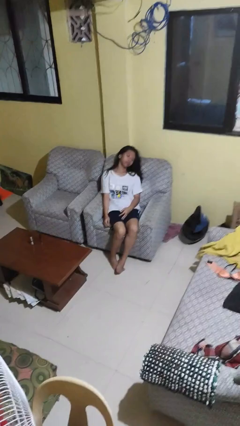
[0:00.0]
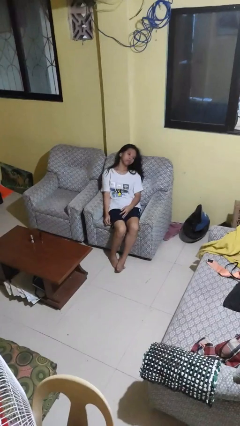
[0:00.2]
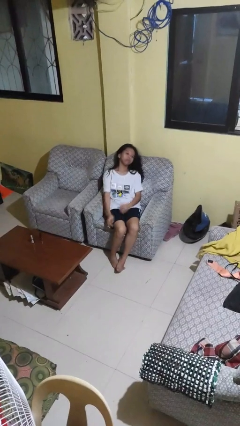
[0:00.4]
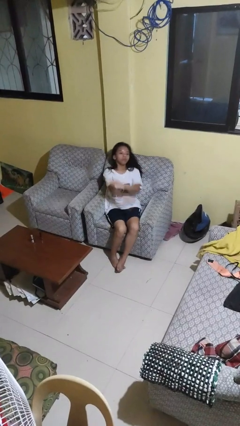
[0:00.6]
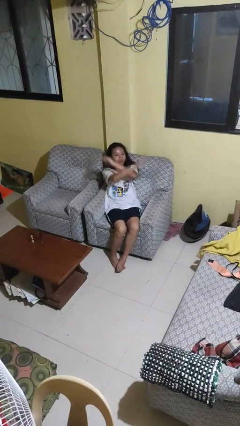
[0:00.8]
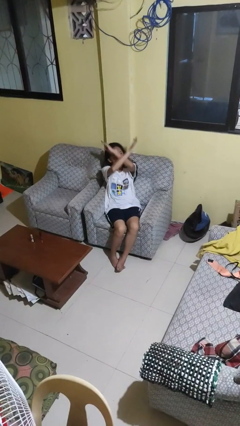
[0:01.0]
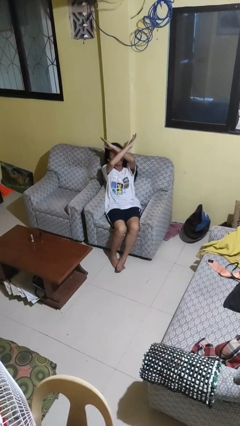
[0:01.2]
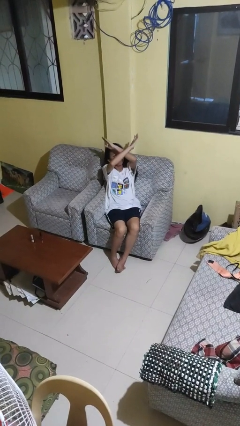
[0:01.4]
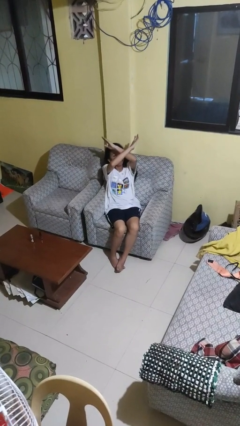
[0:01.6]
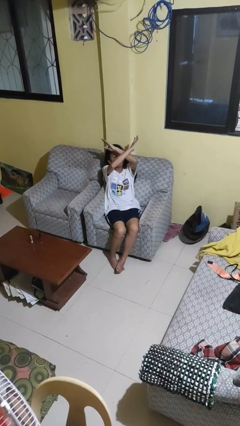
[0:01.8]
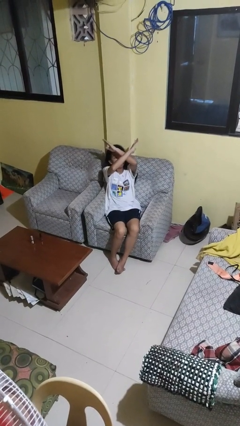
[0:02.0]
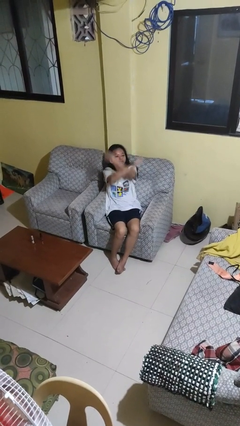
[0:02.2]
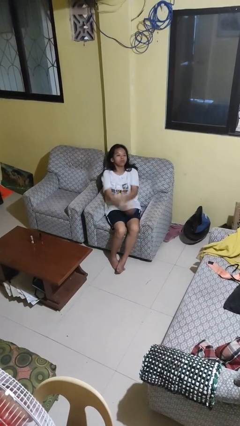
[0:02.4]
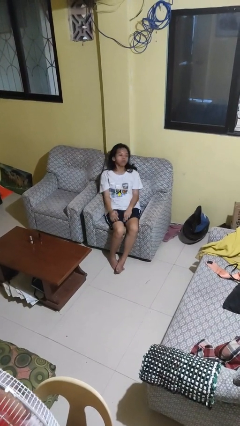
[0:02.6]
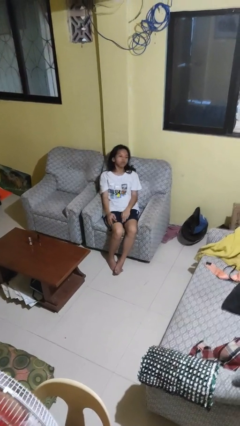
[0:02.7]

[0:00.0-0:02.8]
person gestures arms x

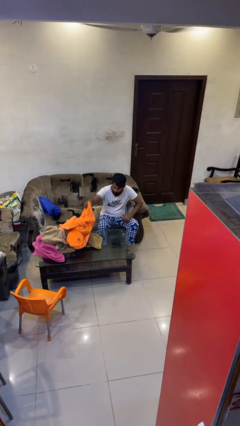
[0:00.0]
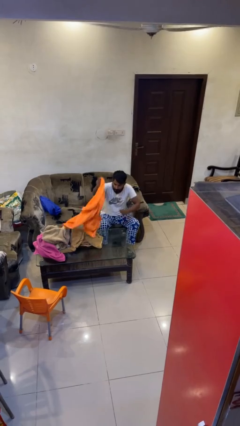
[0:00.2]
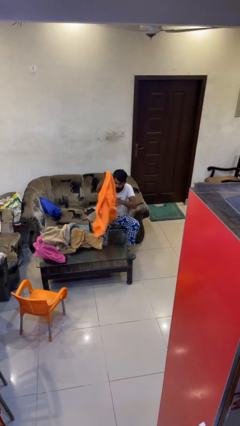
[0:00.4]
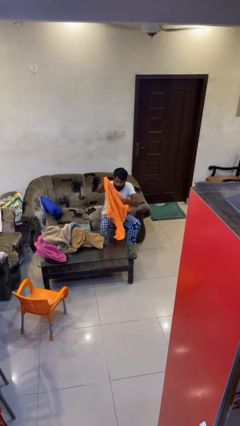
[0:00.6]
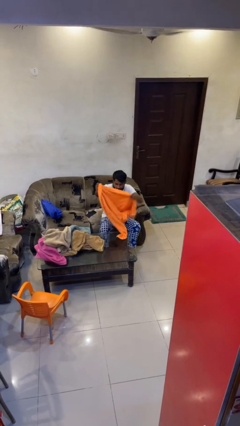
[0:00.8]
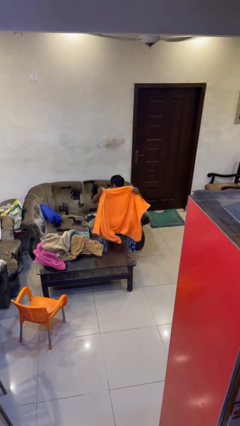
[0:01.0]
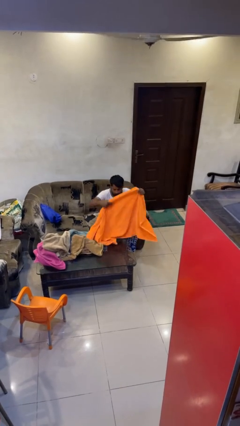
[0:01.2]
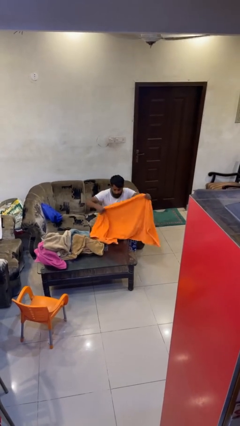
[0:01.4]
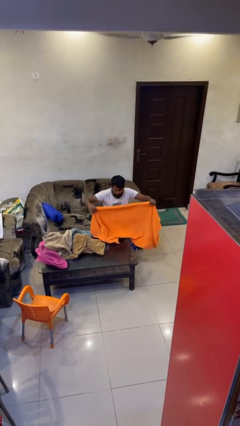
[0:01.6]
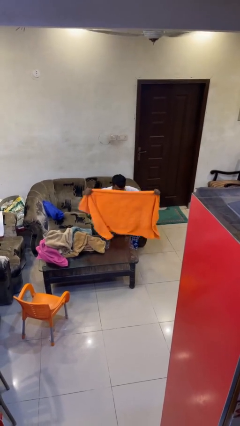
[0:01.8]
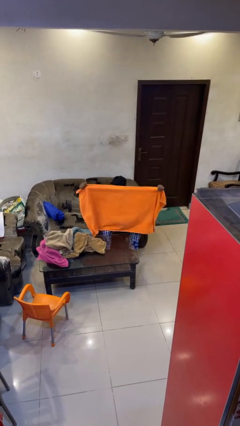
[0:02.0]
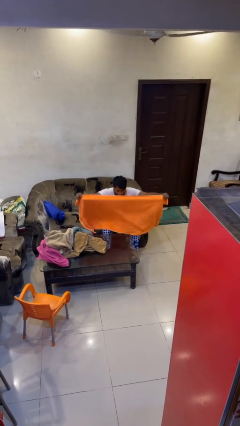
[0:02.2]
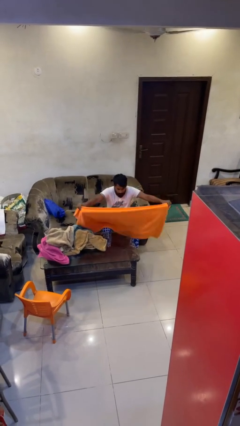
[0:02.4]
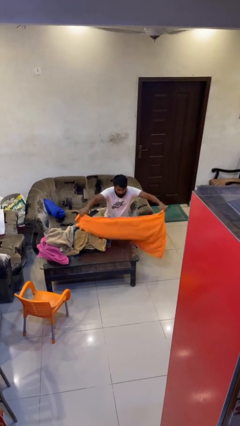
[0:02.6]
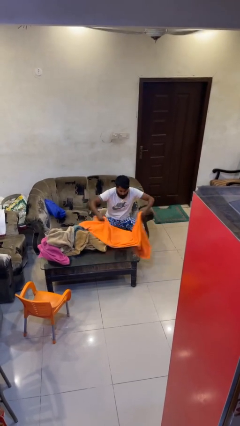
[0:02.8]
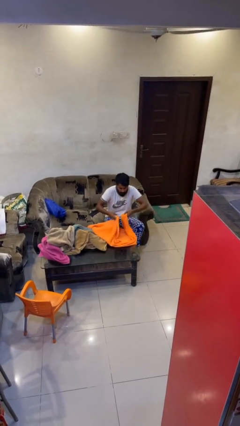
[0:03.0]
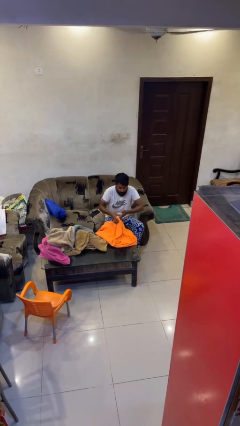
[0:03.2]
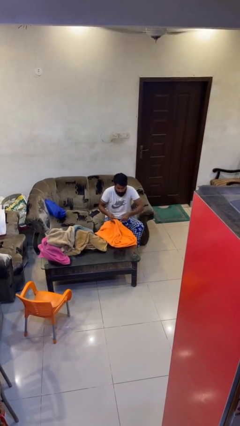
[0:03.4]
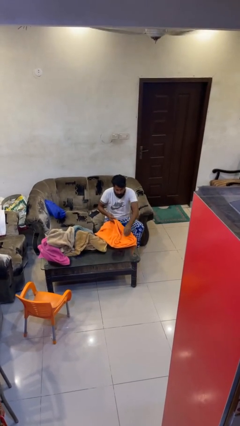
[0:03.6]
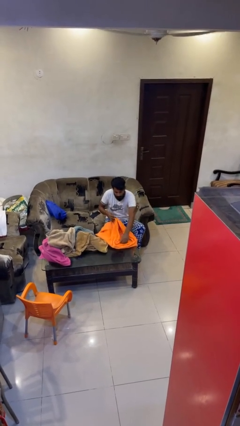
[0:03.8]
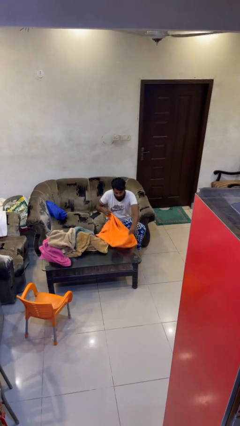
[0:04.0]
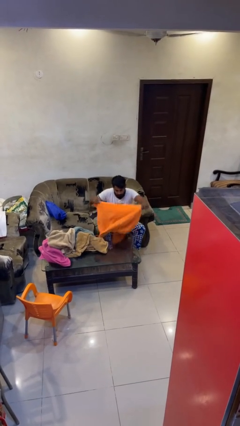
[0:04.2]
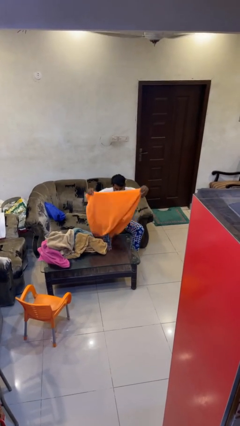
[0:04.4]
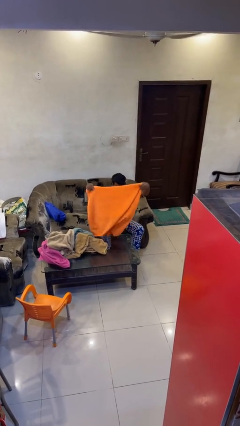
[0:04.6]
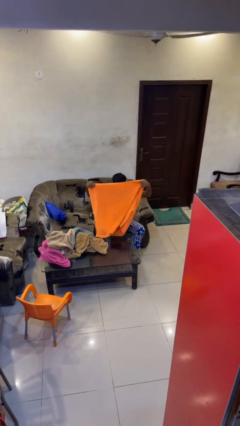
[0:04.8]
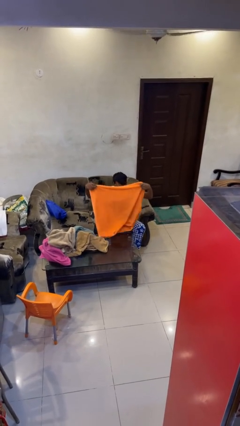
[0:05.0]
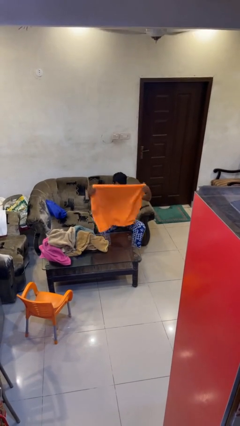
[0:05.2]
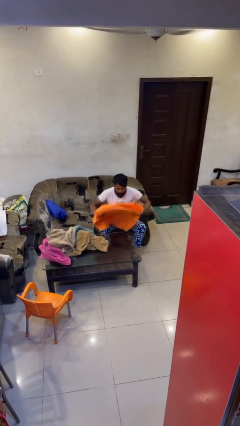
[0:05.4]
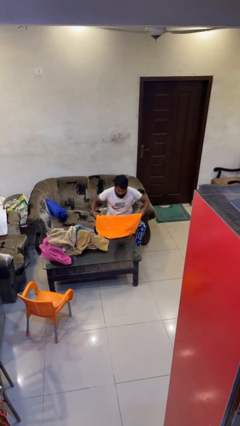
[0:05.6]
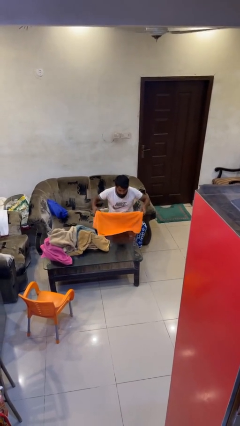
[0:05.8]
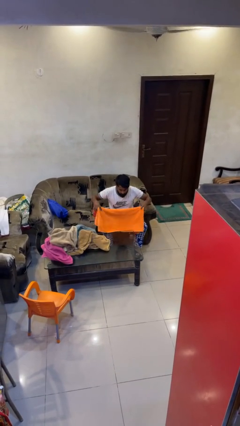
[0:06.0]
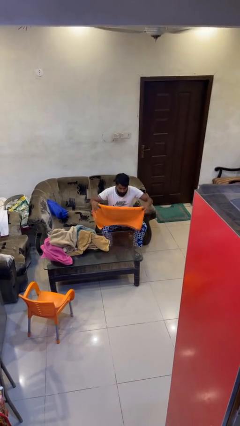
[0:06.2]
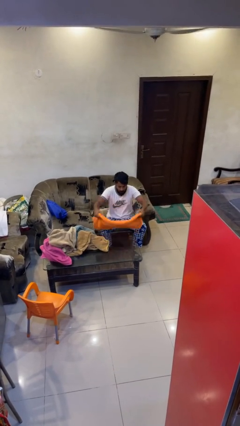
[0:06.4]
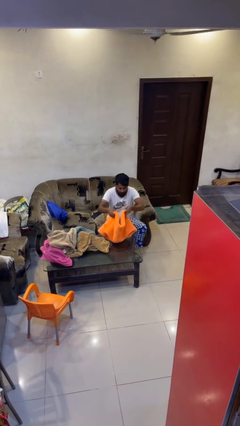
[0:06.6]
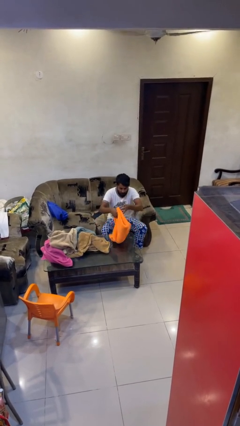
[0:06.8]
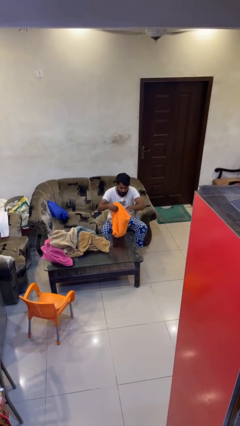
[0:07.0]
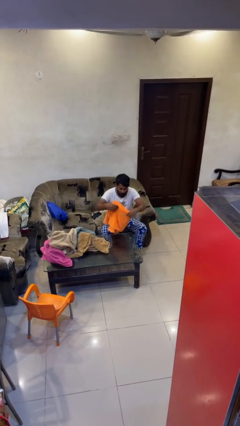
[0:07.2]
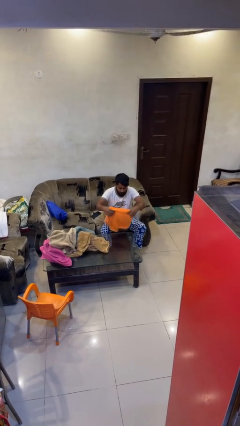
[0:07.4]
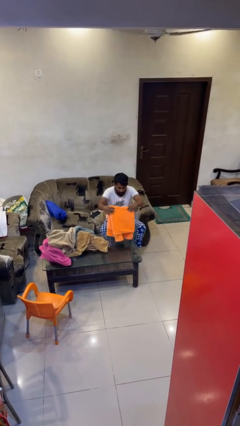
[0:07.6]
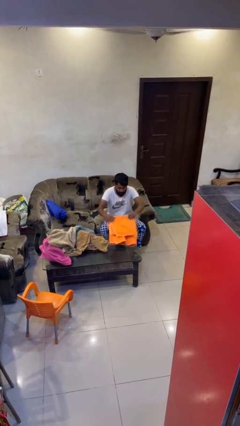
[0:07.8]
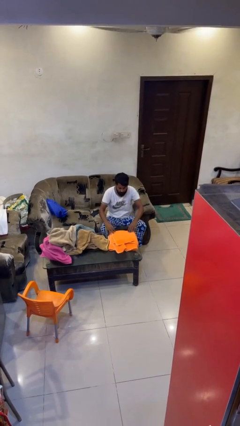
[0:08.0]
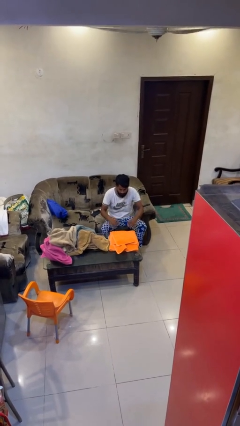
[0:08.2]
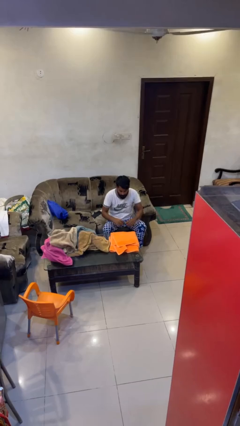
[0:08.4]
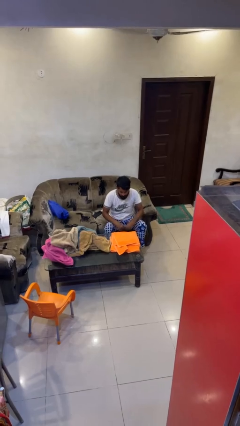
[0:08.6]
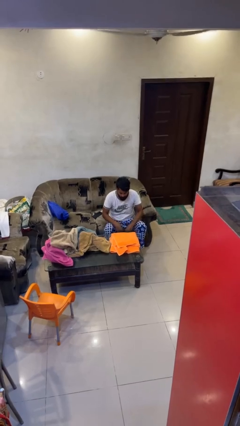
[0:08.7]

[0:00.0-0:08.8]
person folds towel

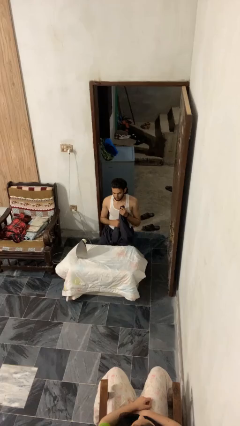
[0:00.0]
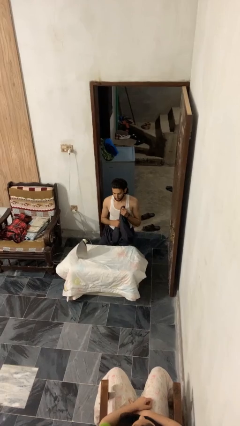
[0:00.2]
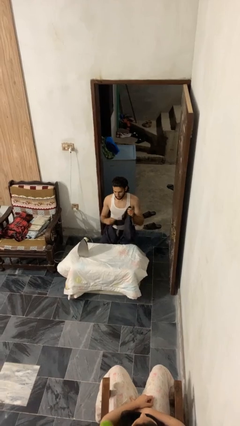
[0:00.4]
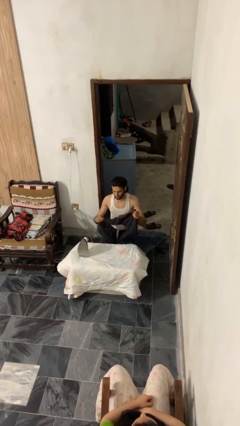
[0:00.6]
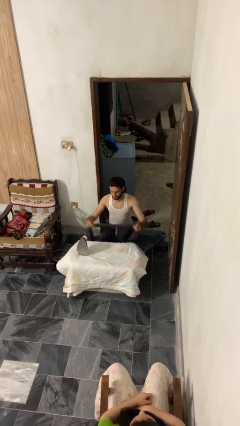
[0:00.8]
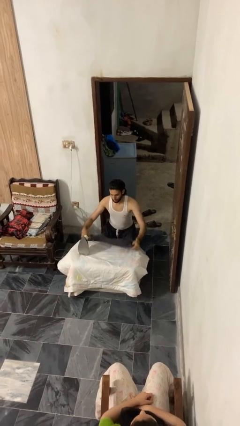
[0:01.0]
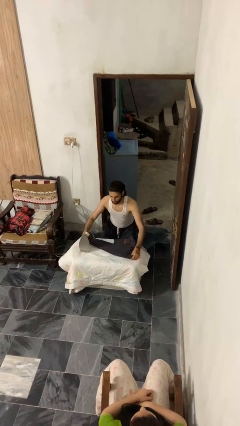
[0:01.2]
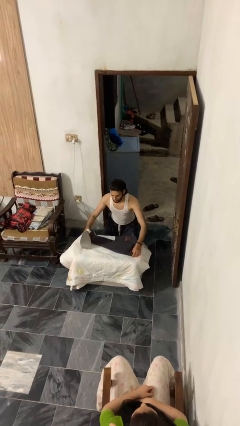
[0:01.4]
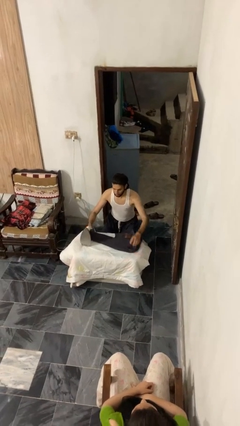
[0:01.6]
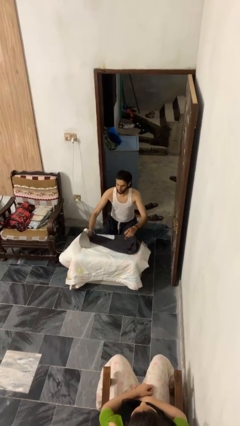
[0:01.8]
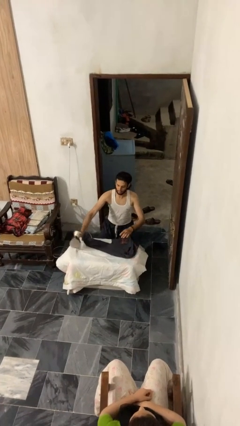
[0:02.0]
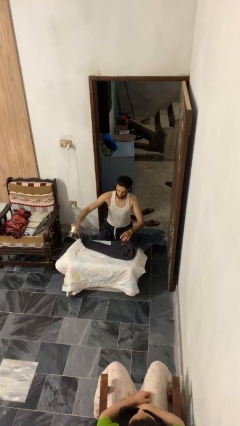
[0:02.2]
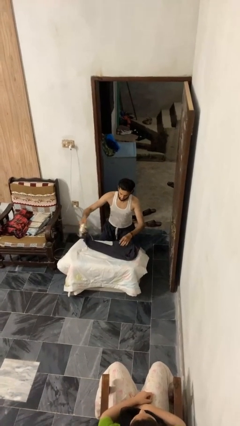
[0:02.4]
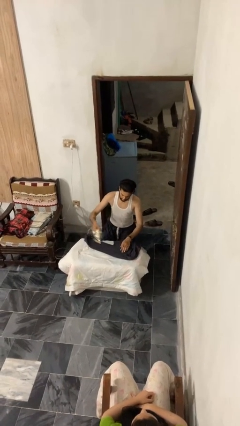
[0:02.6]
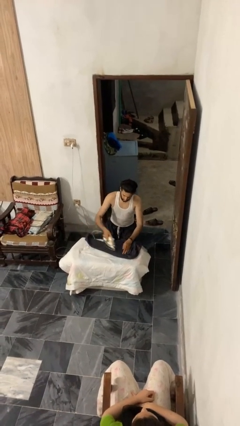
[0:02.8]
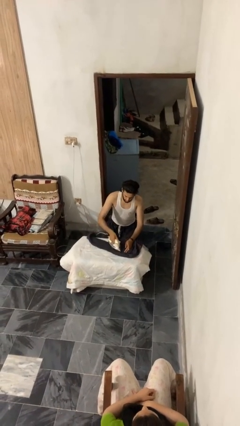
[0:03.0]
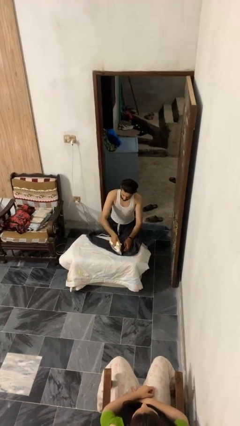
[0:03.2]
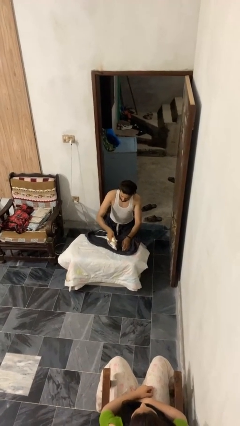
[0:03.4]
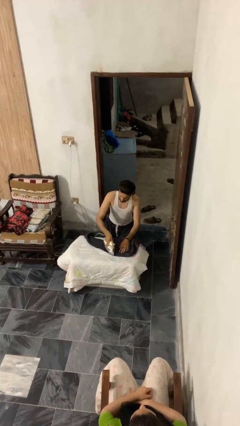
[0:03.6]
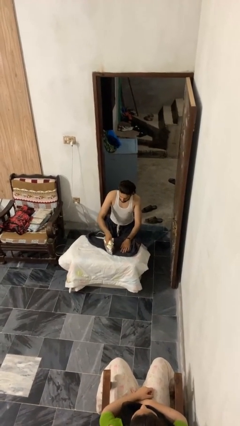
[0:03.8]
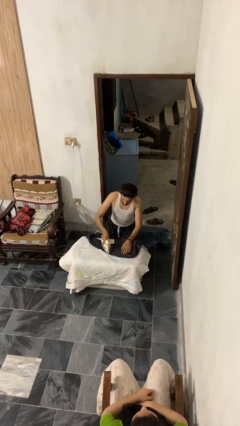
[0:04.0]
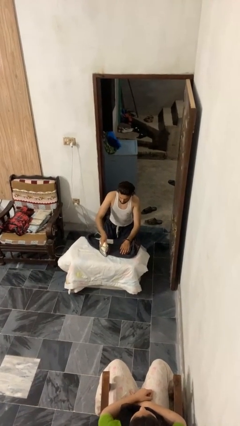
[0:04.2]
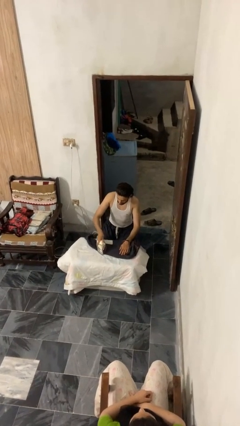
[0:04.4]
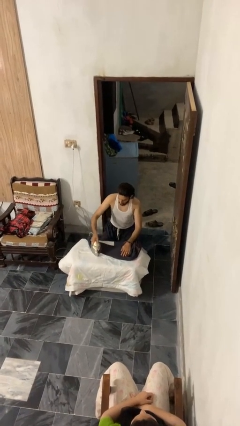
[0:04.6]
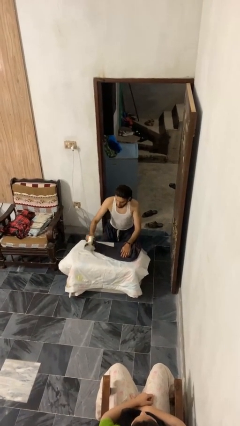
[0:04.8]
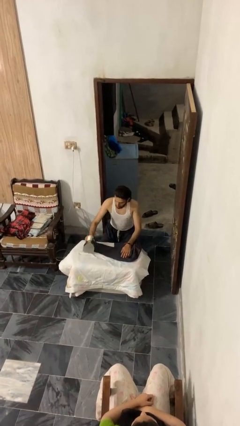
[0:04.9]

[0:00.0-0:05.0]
person irons clothes

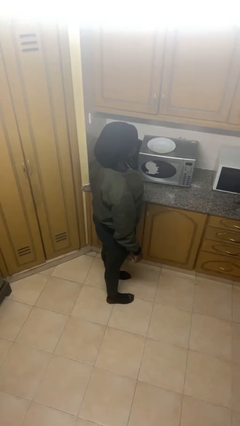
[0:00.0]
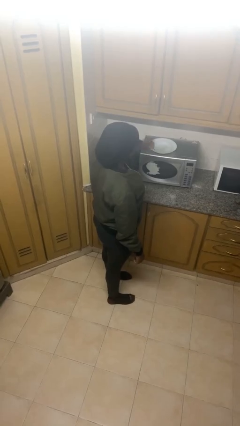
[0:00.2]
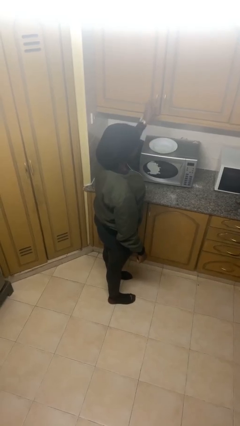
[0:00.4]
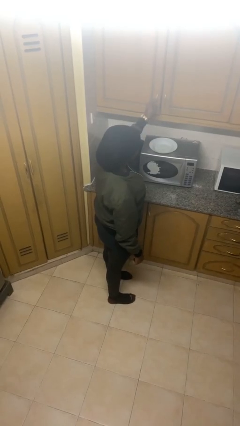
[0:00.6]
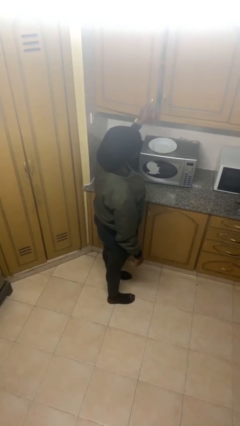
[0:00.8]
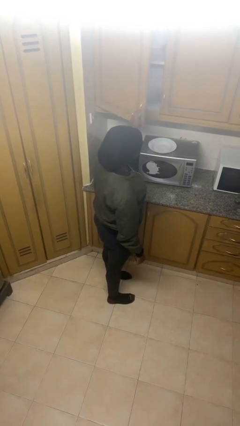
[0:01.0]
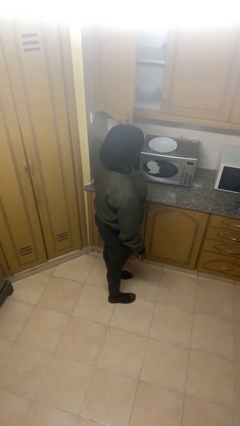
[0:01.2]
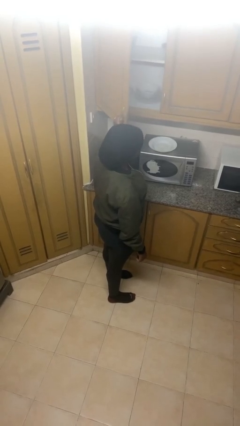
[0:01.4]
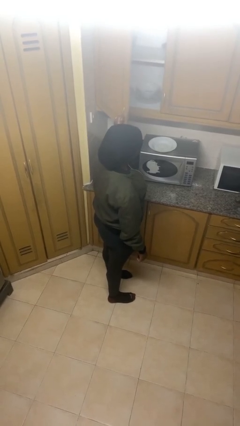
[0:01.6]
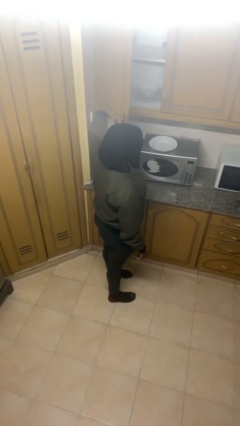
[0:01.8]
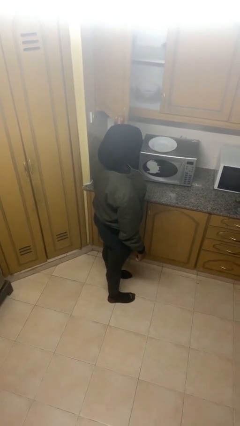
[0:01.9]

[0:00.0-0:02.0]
person opens cabinet
